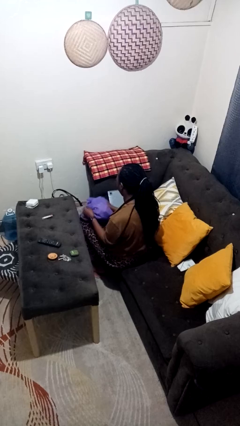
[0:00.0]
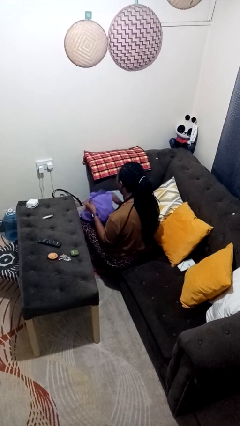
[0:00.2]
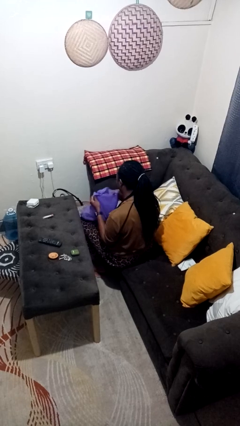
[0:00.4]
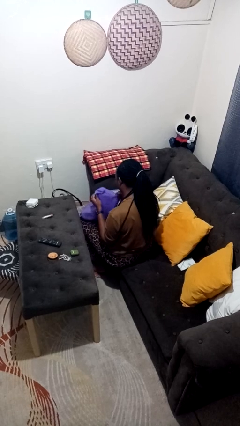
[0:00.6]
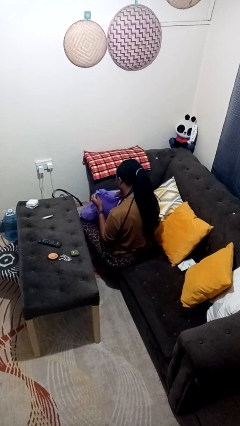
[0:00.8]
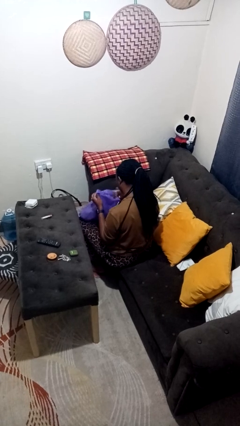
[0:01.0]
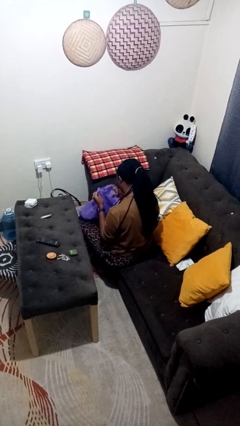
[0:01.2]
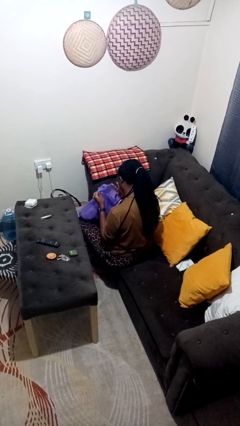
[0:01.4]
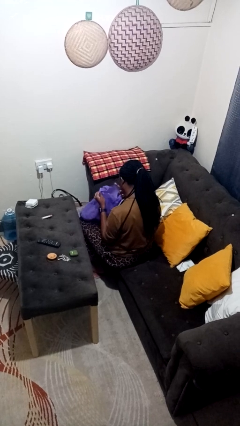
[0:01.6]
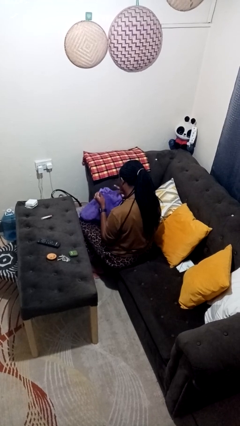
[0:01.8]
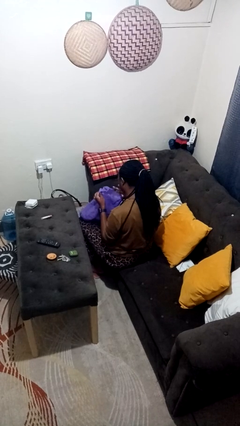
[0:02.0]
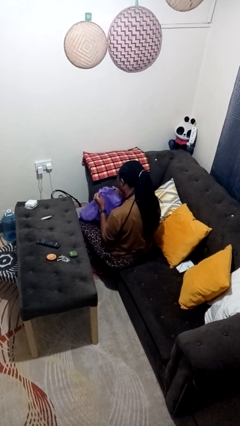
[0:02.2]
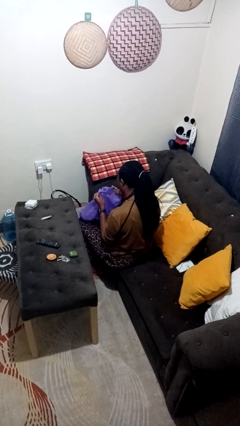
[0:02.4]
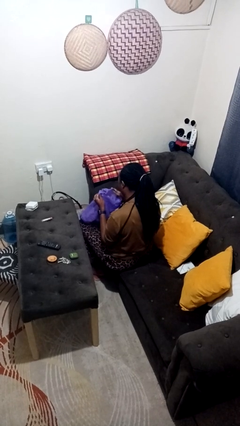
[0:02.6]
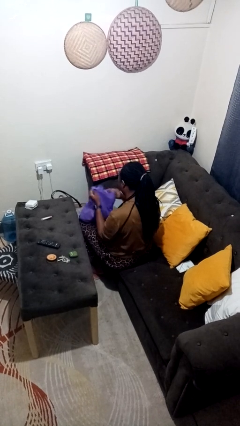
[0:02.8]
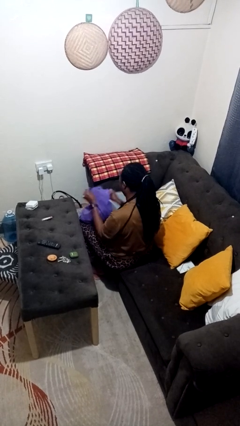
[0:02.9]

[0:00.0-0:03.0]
person searches in bag

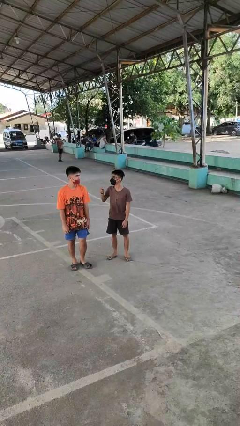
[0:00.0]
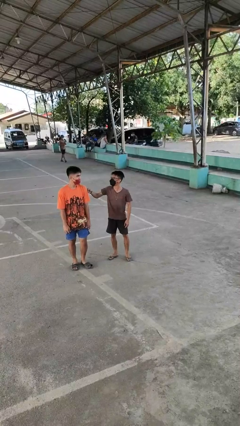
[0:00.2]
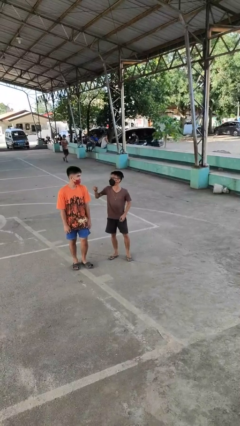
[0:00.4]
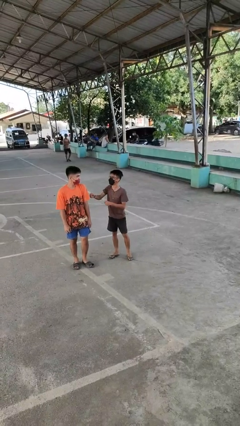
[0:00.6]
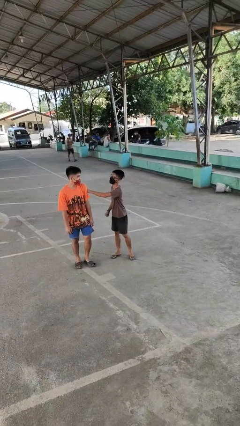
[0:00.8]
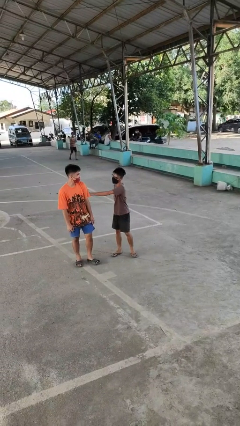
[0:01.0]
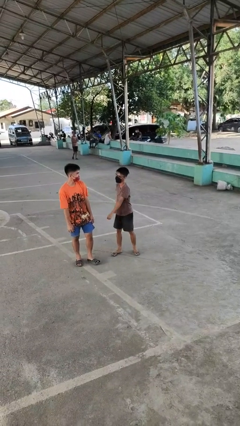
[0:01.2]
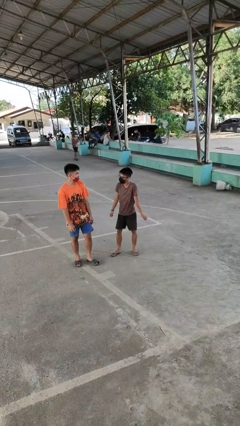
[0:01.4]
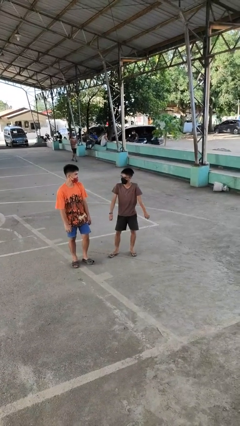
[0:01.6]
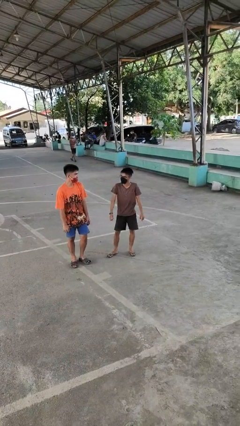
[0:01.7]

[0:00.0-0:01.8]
person pounds shoulders of person

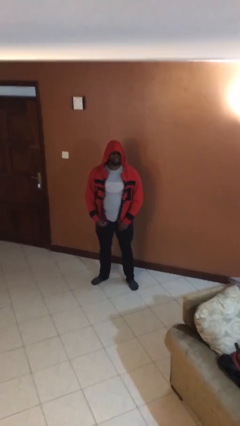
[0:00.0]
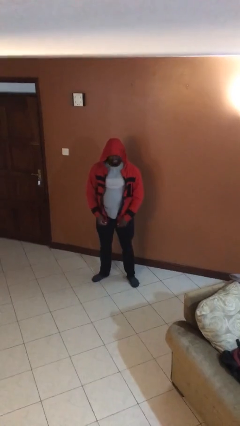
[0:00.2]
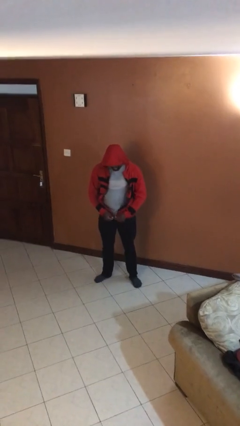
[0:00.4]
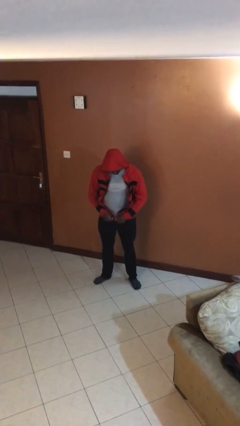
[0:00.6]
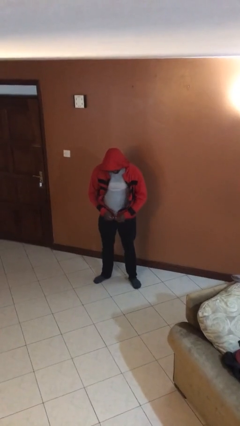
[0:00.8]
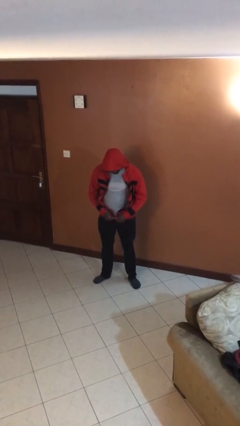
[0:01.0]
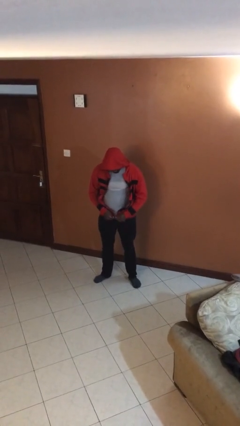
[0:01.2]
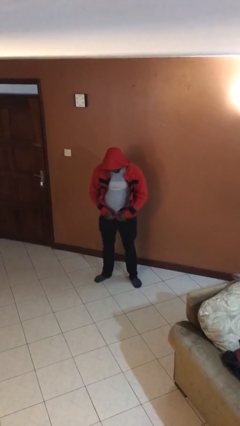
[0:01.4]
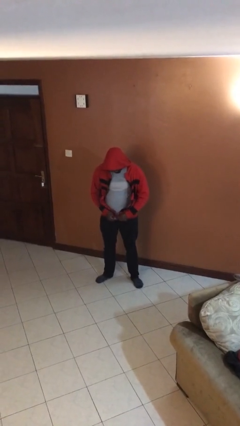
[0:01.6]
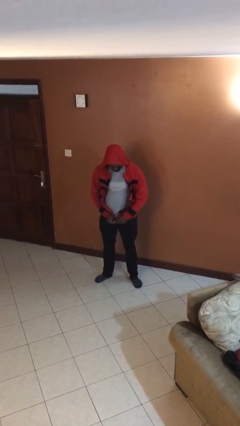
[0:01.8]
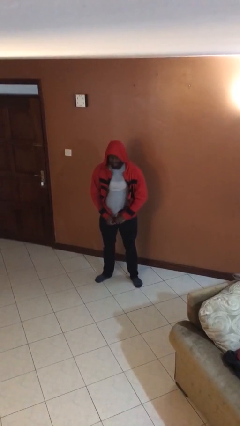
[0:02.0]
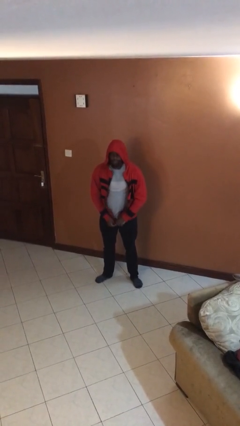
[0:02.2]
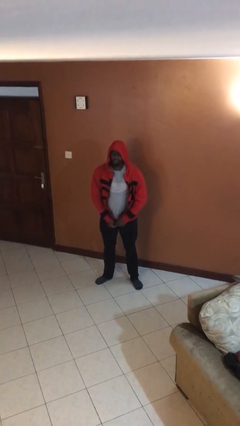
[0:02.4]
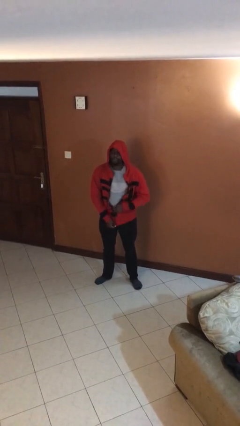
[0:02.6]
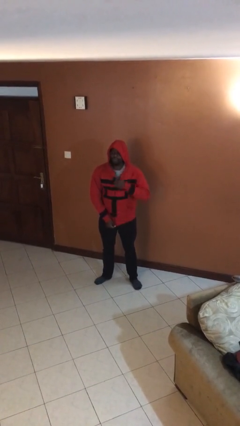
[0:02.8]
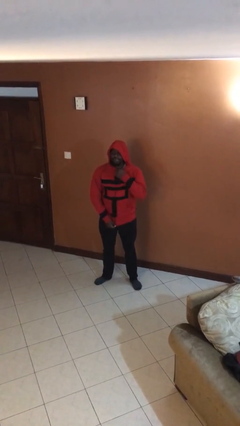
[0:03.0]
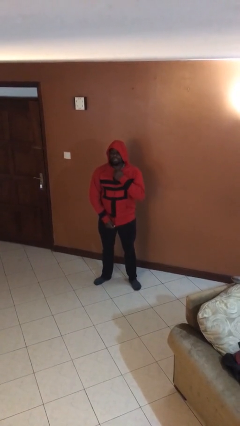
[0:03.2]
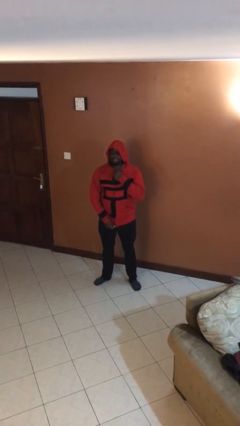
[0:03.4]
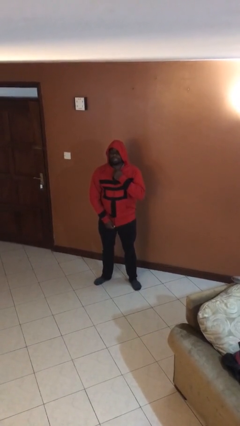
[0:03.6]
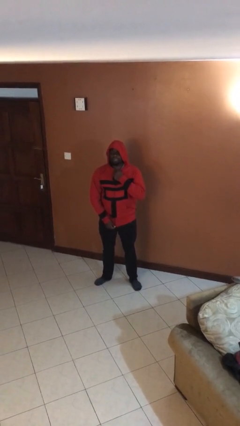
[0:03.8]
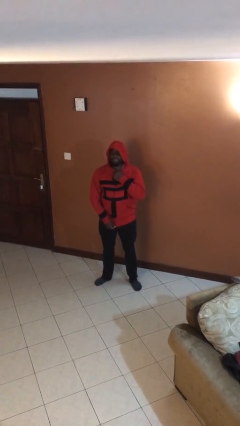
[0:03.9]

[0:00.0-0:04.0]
person zips up jacket

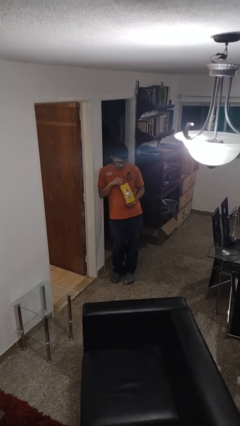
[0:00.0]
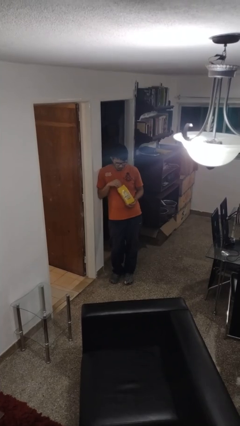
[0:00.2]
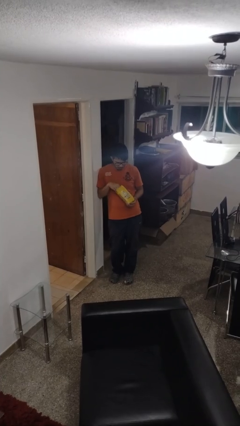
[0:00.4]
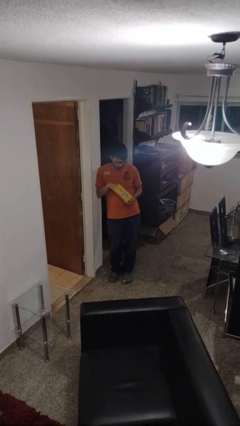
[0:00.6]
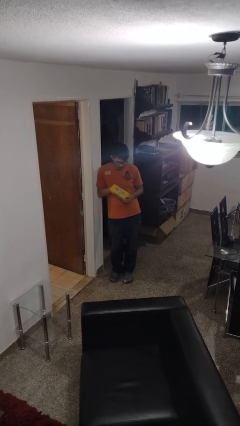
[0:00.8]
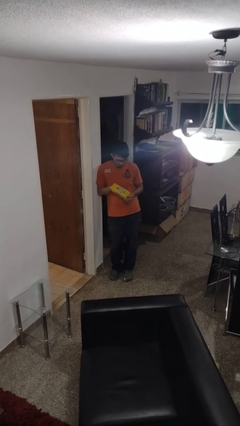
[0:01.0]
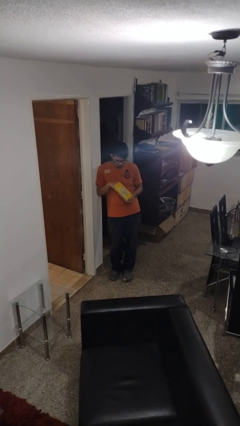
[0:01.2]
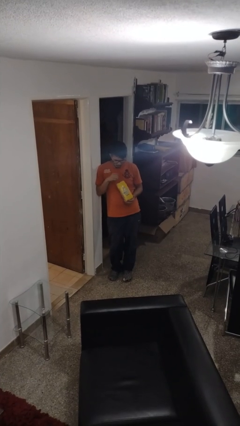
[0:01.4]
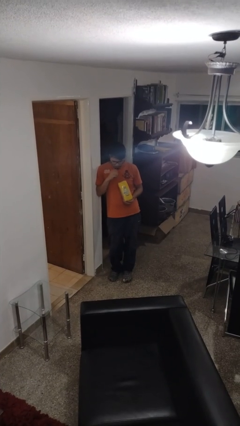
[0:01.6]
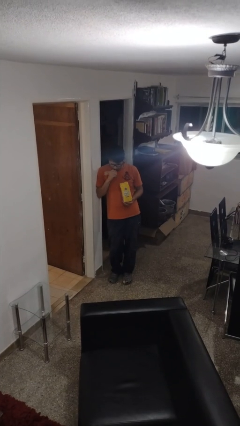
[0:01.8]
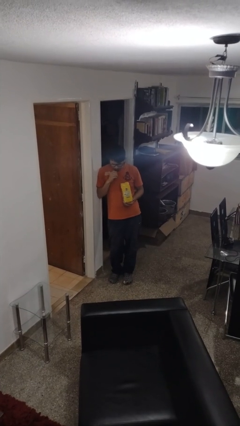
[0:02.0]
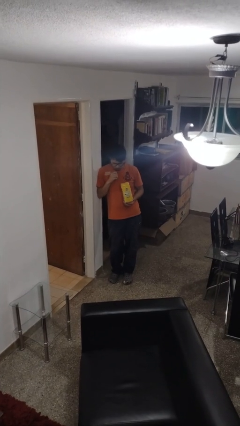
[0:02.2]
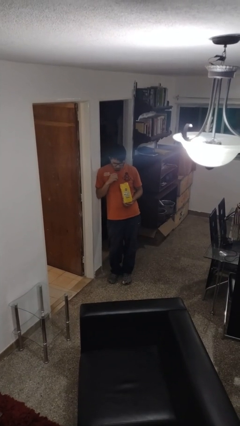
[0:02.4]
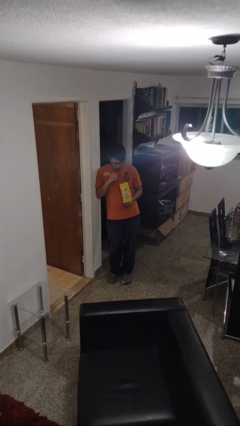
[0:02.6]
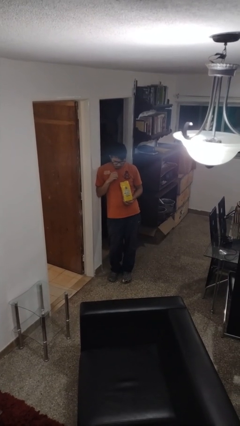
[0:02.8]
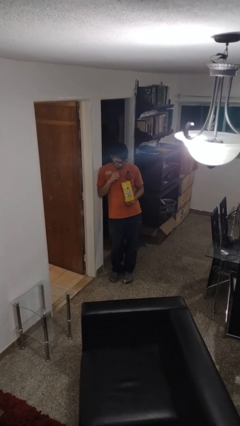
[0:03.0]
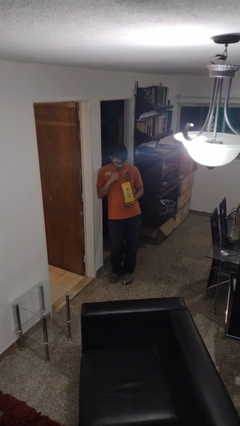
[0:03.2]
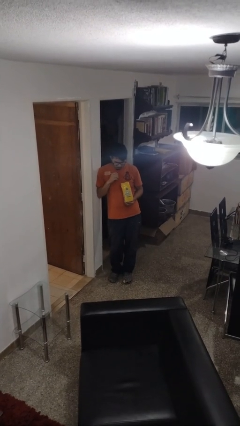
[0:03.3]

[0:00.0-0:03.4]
person eats snack from bag

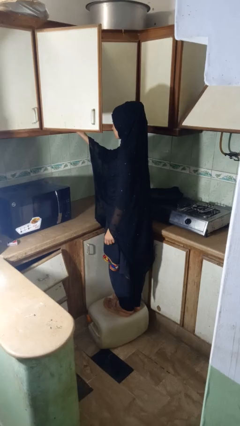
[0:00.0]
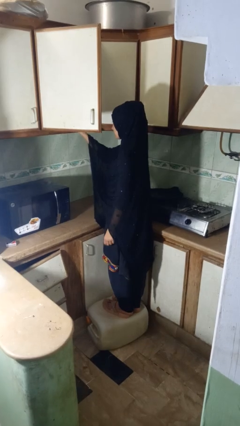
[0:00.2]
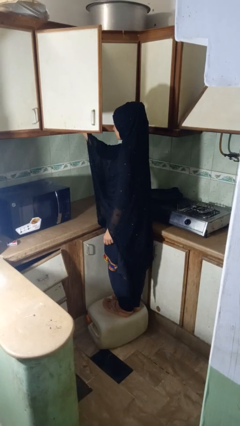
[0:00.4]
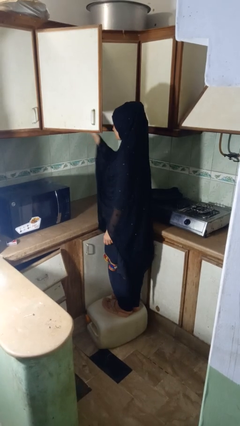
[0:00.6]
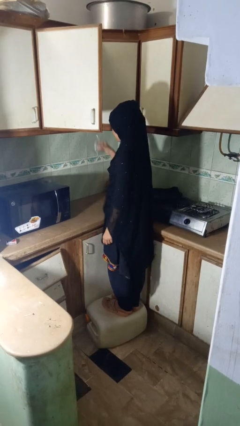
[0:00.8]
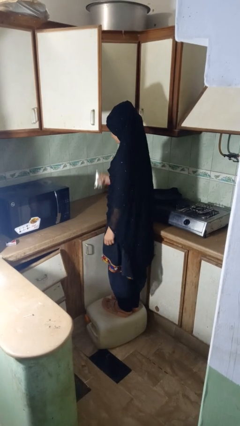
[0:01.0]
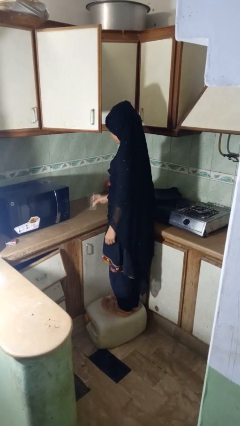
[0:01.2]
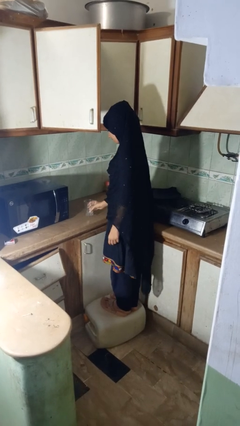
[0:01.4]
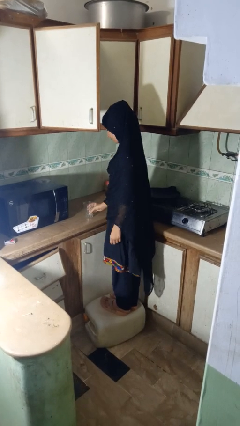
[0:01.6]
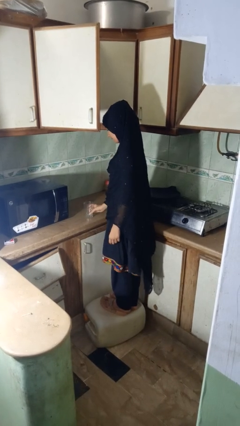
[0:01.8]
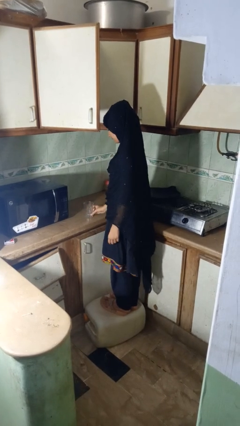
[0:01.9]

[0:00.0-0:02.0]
person puts down object into cabinet

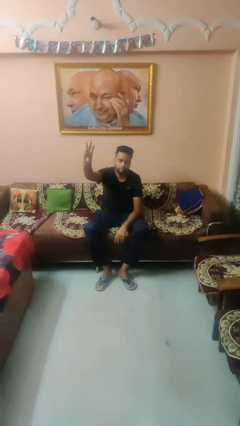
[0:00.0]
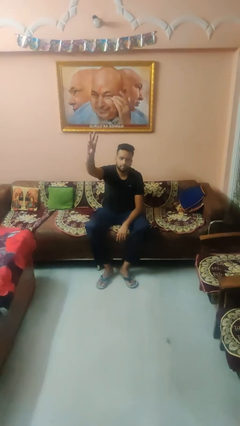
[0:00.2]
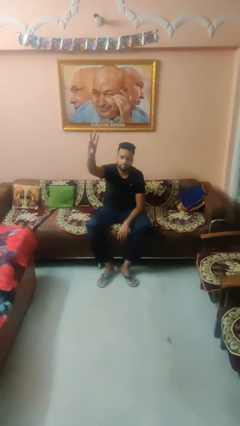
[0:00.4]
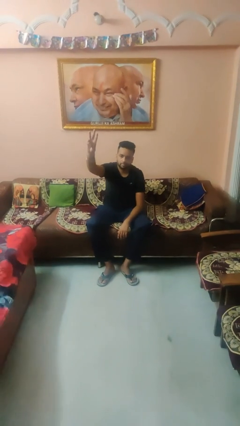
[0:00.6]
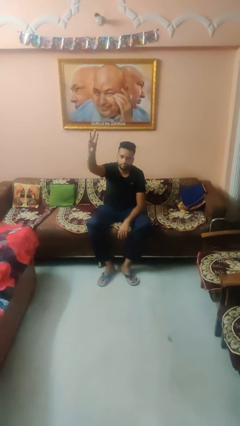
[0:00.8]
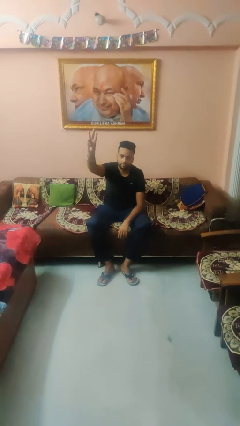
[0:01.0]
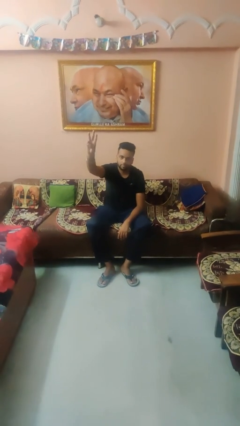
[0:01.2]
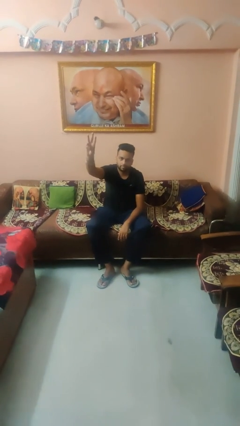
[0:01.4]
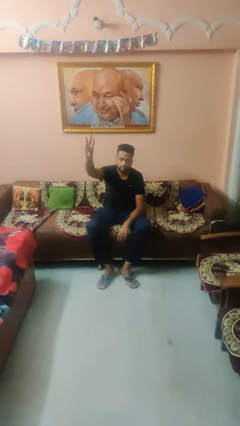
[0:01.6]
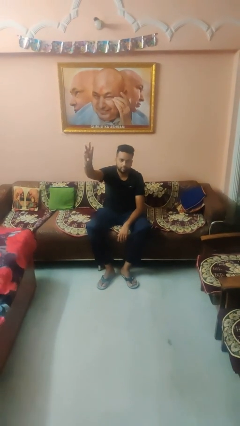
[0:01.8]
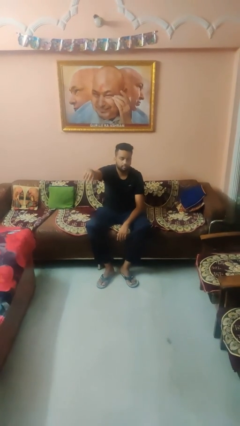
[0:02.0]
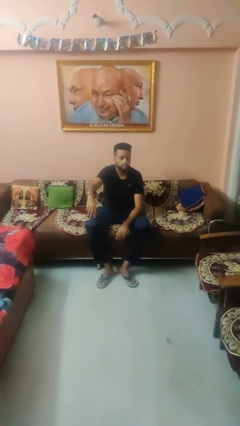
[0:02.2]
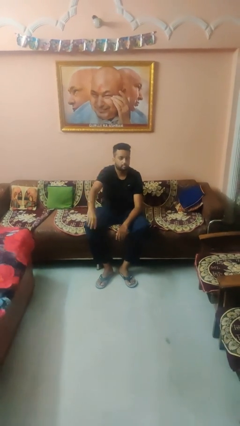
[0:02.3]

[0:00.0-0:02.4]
person gestures number three

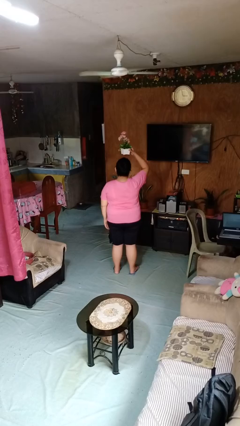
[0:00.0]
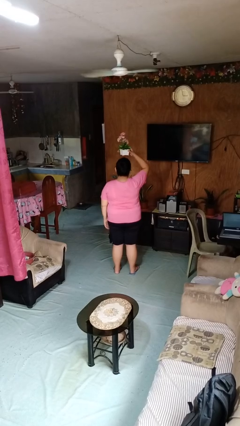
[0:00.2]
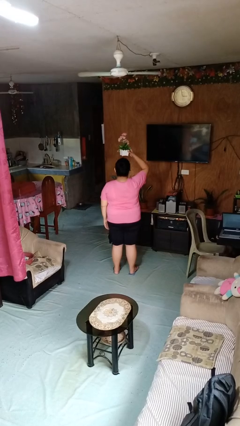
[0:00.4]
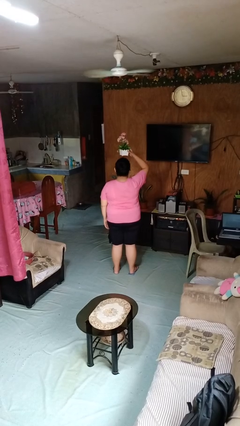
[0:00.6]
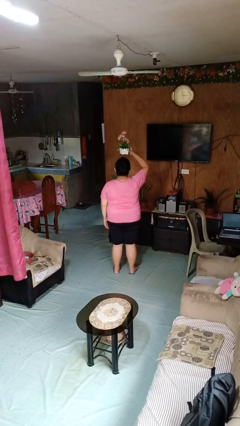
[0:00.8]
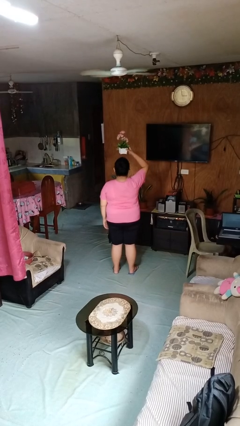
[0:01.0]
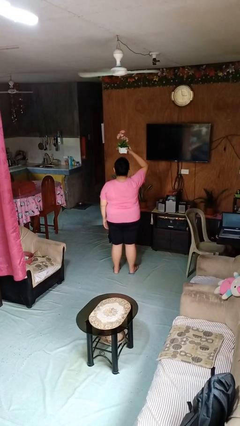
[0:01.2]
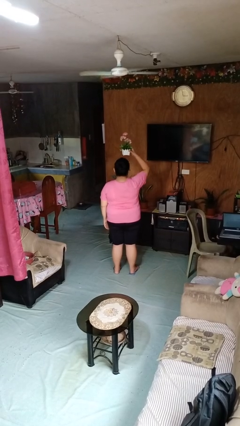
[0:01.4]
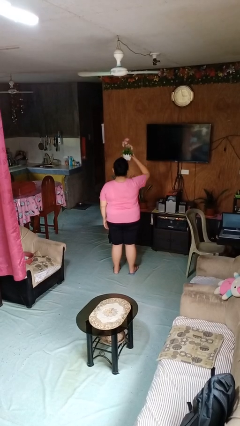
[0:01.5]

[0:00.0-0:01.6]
person holds object above head
